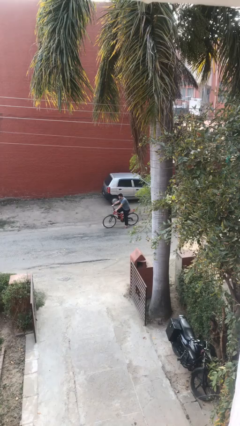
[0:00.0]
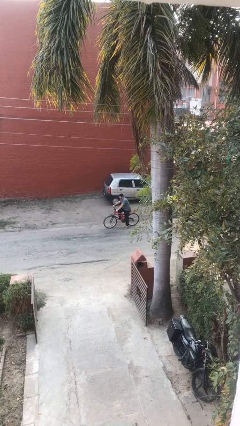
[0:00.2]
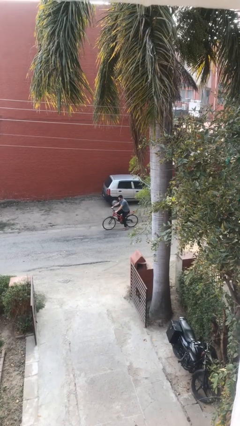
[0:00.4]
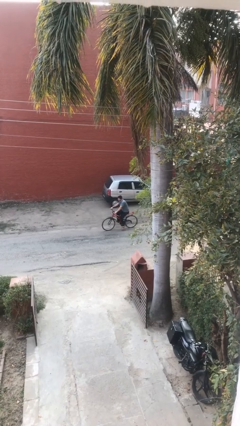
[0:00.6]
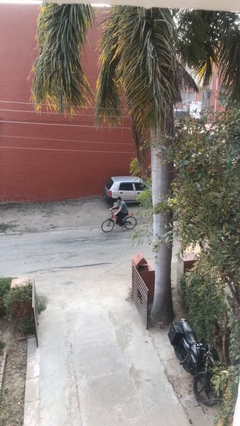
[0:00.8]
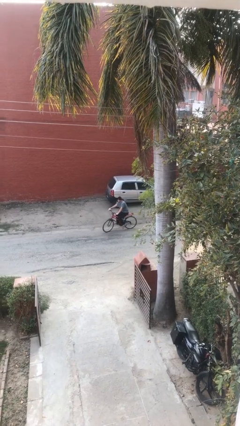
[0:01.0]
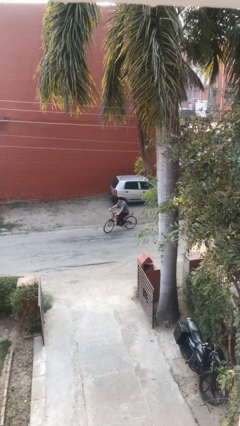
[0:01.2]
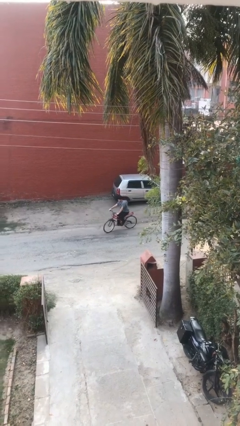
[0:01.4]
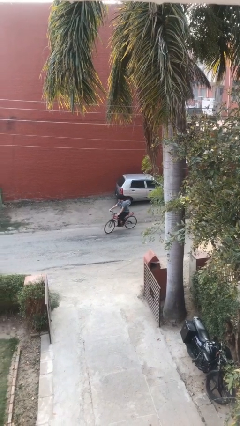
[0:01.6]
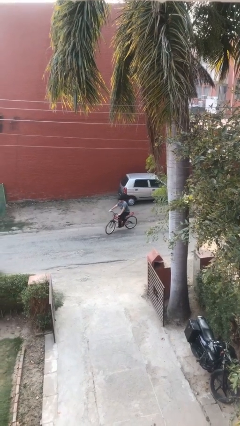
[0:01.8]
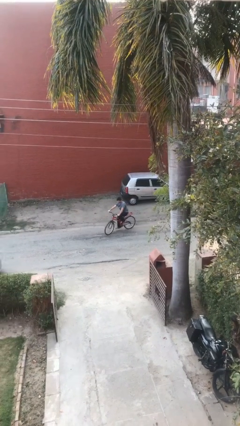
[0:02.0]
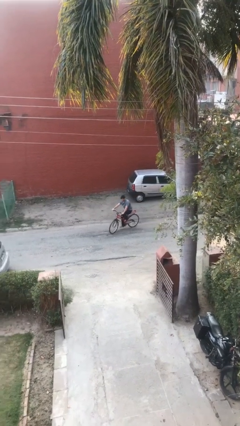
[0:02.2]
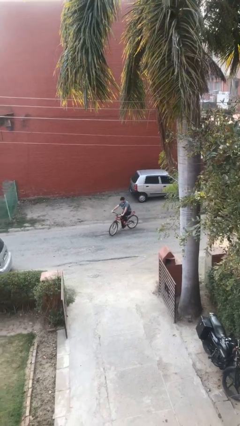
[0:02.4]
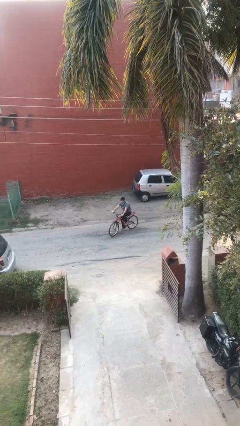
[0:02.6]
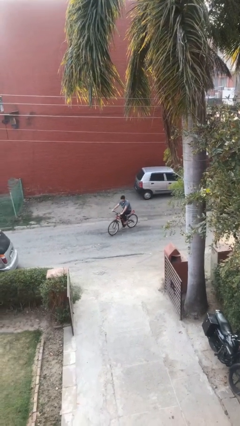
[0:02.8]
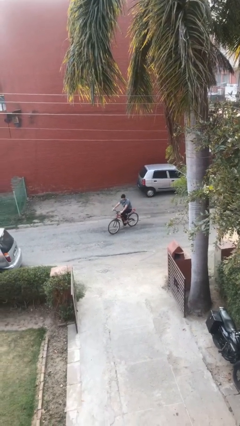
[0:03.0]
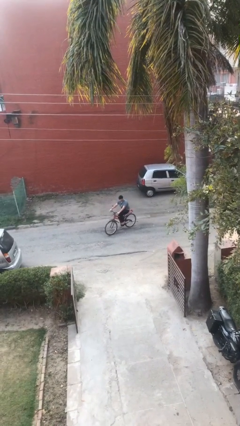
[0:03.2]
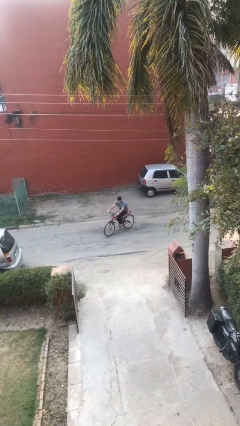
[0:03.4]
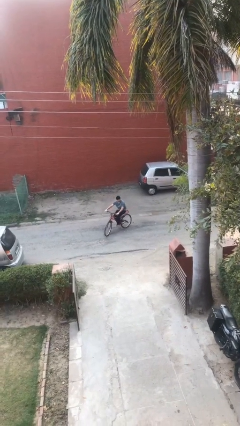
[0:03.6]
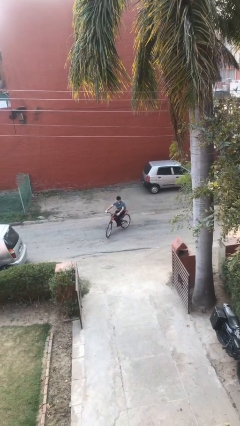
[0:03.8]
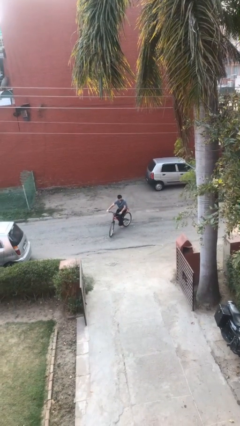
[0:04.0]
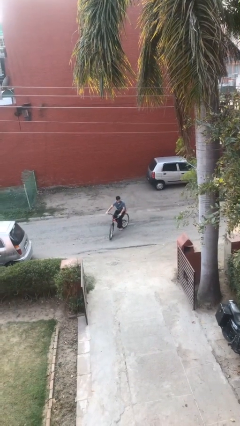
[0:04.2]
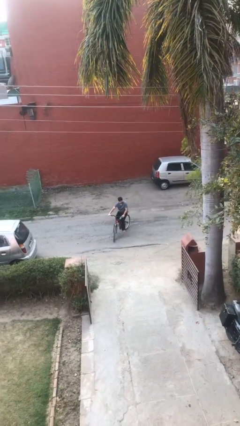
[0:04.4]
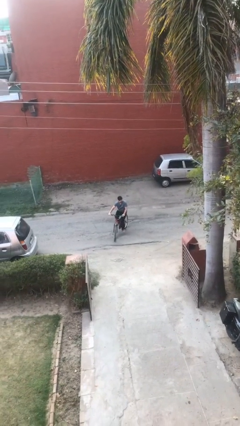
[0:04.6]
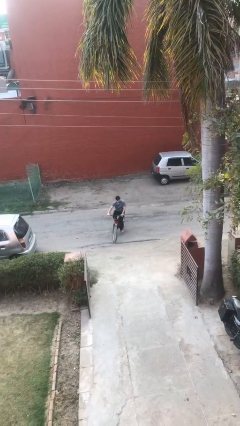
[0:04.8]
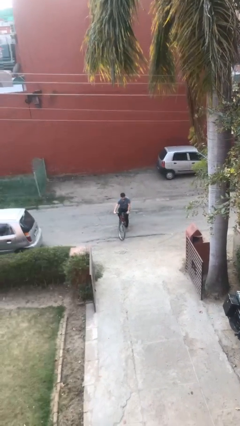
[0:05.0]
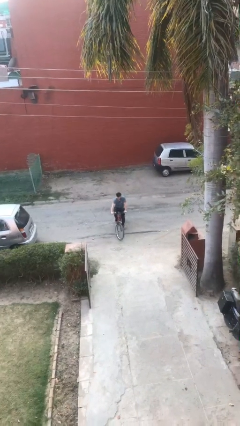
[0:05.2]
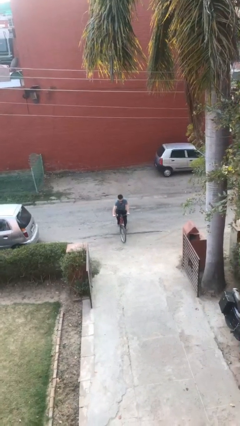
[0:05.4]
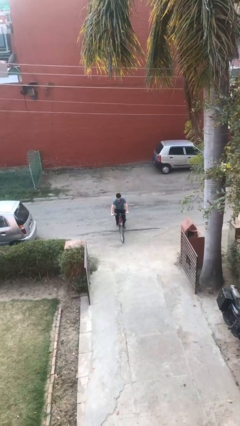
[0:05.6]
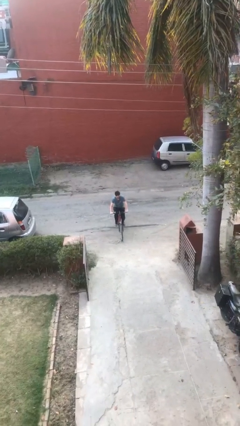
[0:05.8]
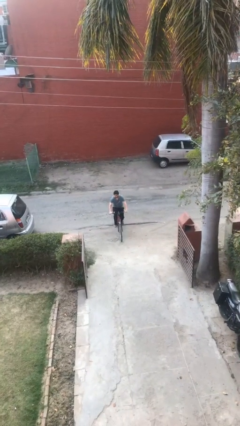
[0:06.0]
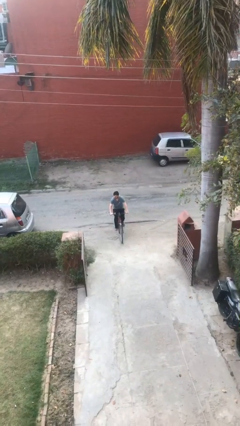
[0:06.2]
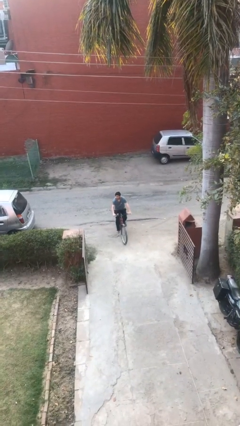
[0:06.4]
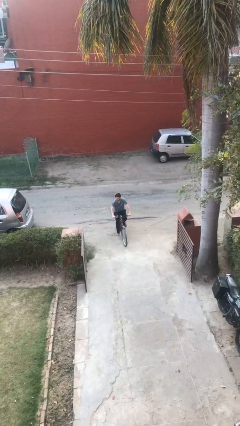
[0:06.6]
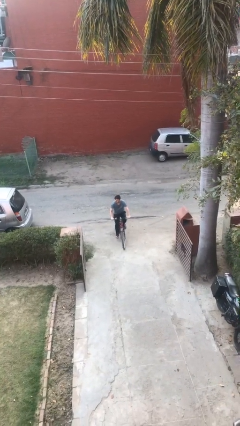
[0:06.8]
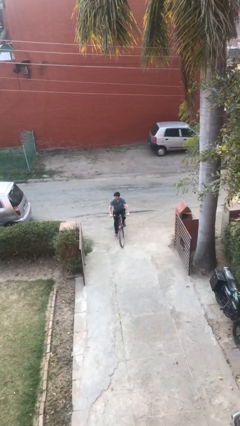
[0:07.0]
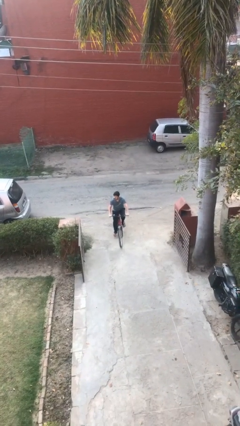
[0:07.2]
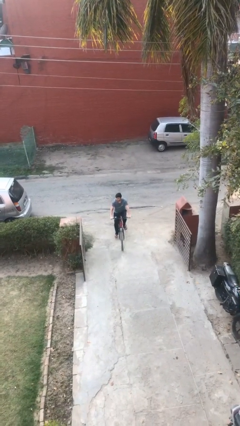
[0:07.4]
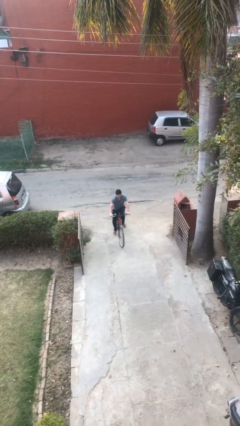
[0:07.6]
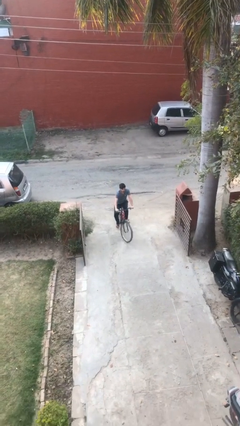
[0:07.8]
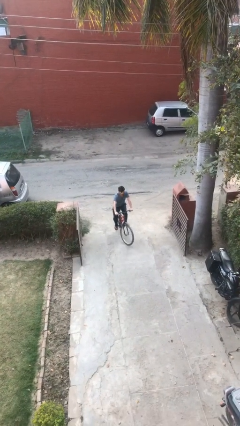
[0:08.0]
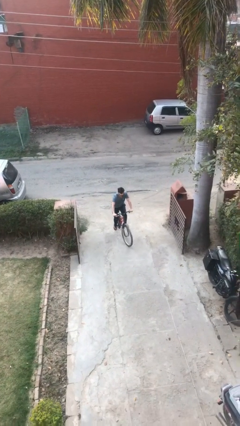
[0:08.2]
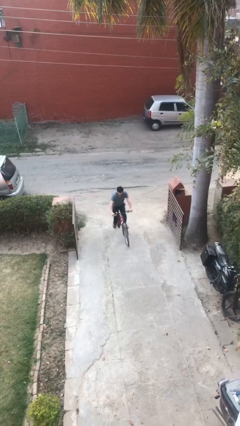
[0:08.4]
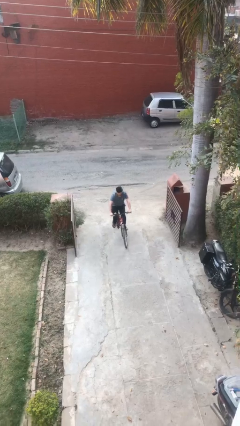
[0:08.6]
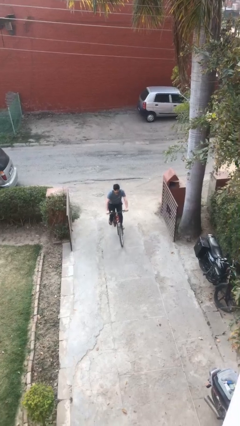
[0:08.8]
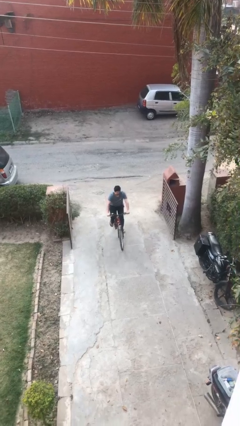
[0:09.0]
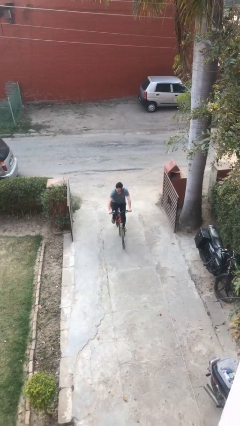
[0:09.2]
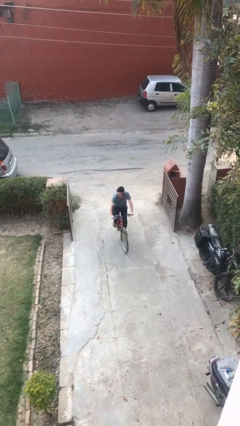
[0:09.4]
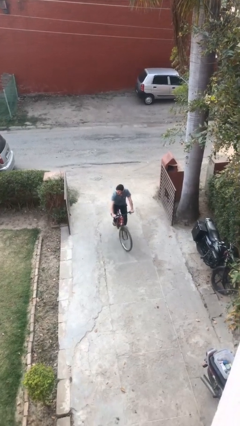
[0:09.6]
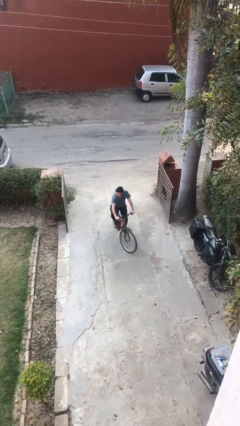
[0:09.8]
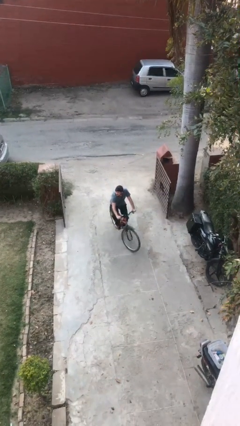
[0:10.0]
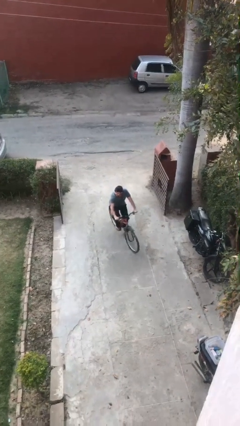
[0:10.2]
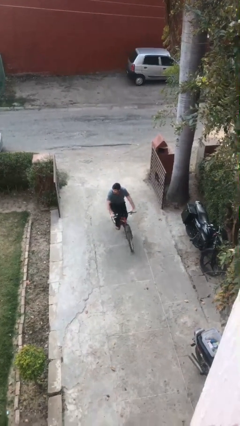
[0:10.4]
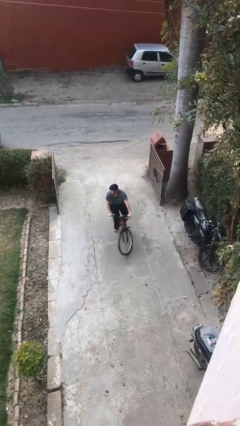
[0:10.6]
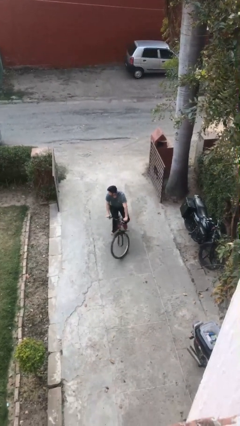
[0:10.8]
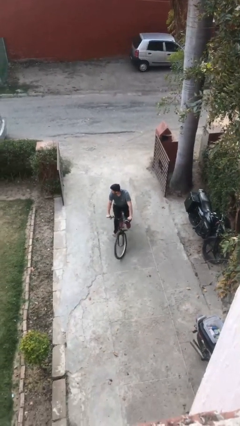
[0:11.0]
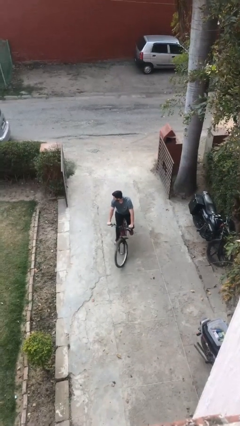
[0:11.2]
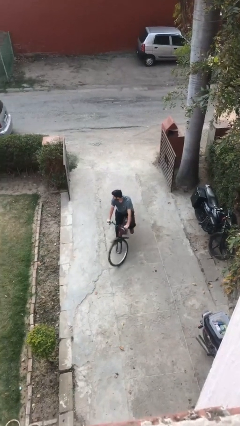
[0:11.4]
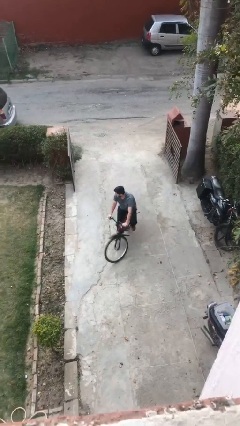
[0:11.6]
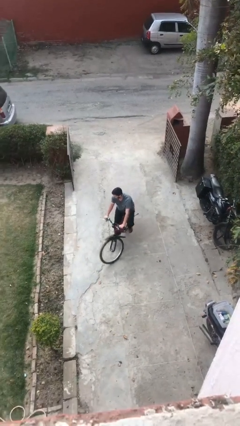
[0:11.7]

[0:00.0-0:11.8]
person rides bicycle

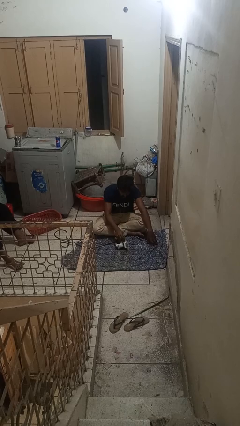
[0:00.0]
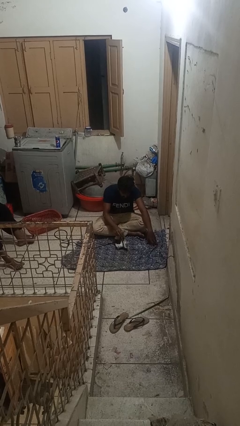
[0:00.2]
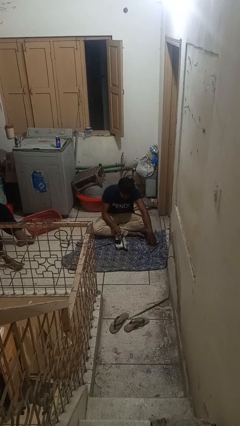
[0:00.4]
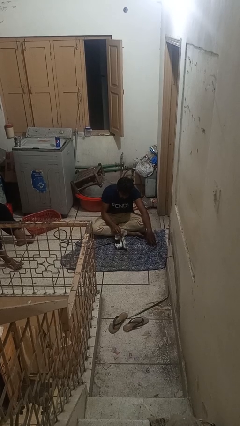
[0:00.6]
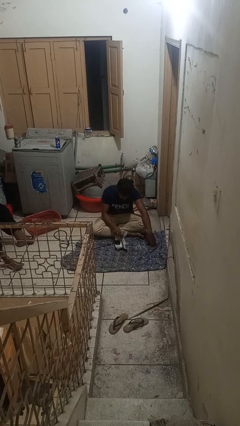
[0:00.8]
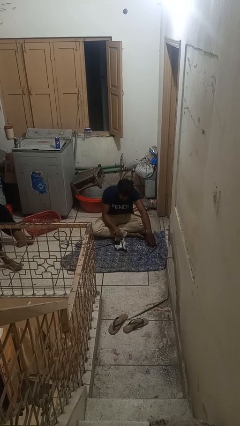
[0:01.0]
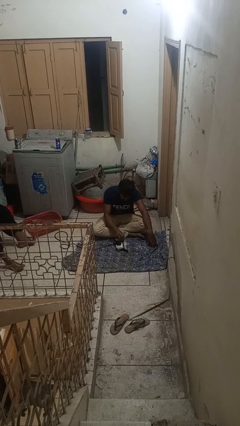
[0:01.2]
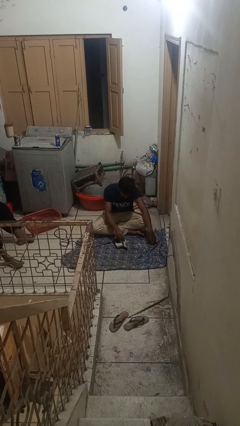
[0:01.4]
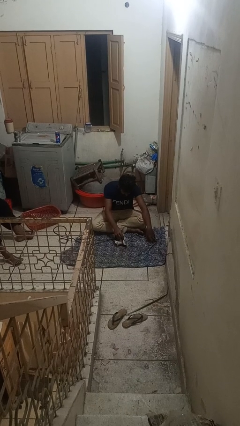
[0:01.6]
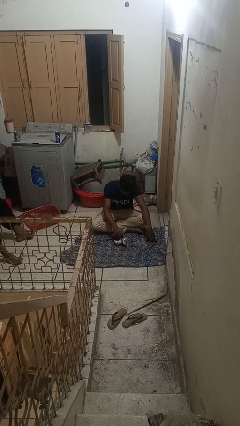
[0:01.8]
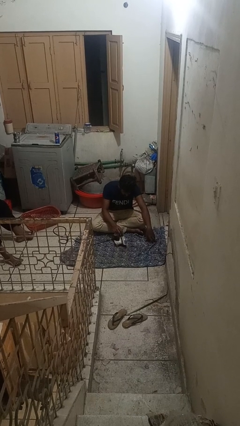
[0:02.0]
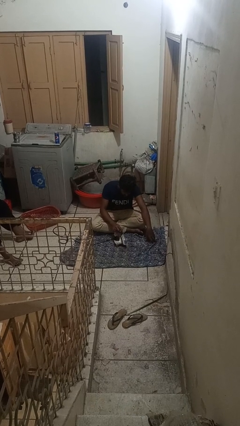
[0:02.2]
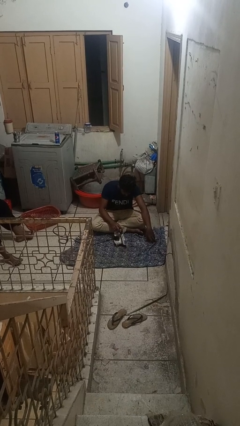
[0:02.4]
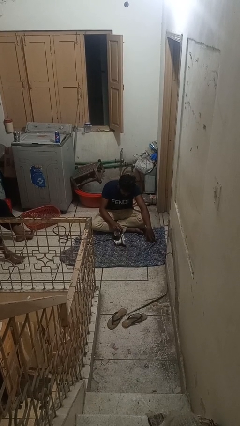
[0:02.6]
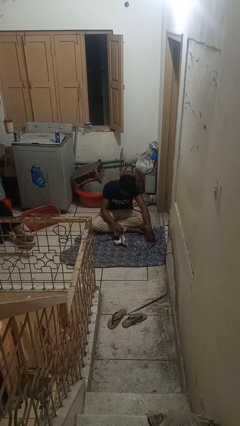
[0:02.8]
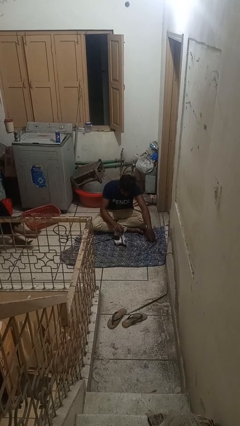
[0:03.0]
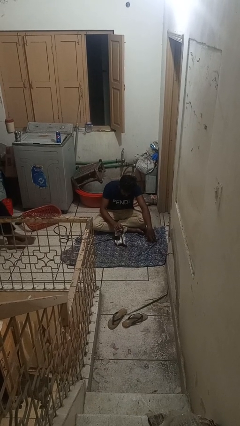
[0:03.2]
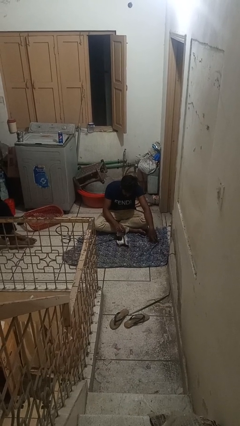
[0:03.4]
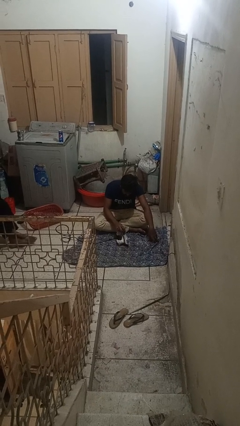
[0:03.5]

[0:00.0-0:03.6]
person taps object with finger

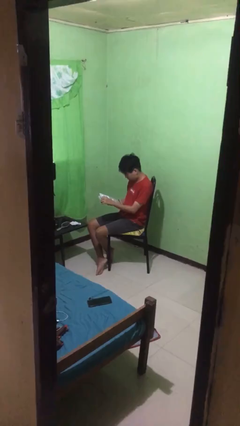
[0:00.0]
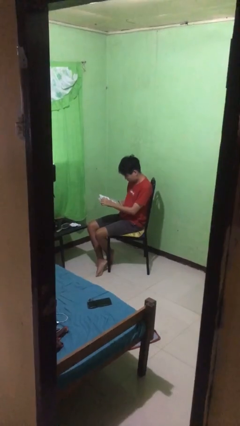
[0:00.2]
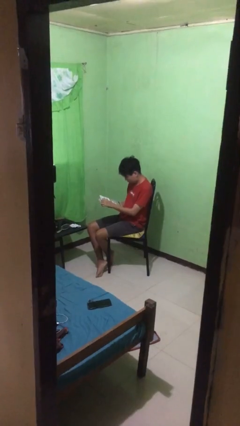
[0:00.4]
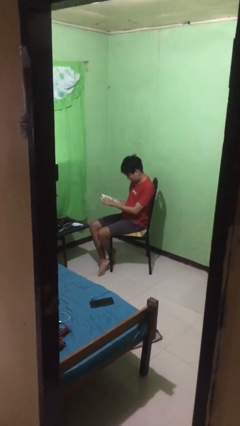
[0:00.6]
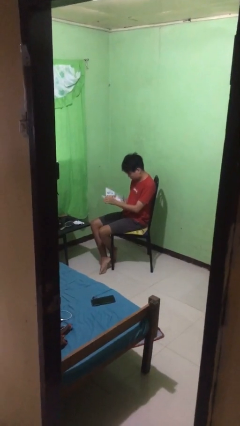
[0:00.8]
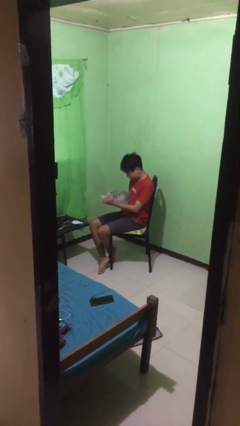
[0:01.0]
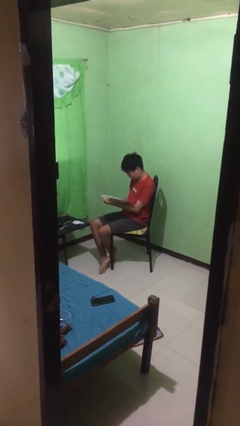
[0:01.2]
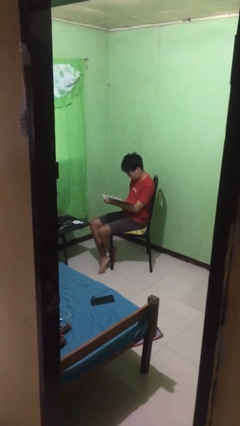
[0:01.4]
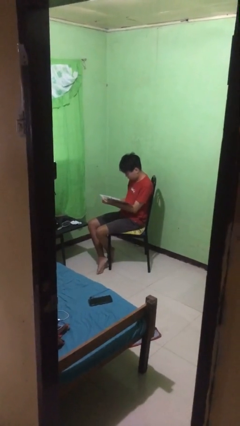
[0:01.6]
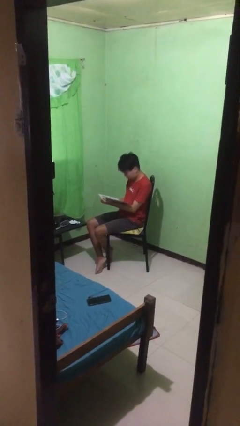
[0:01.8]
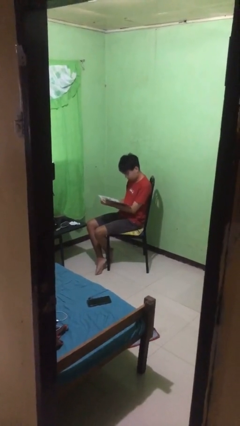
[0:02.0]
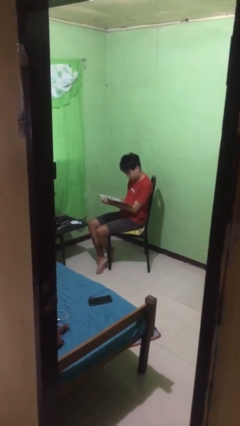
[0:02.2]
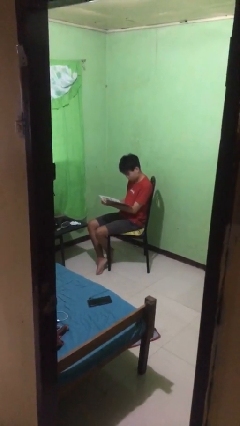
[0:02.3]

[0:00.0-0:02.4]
person reads document

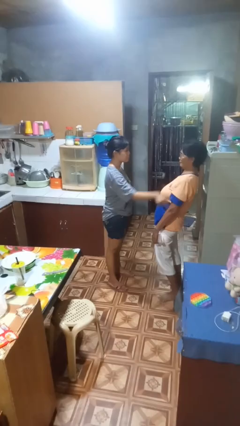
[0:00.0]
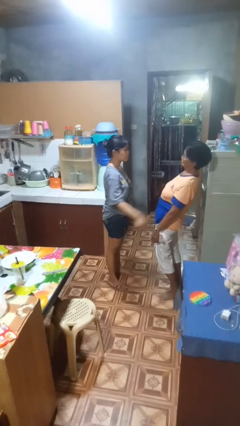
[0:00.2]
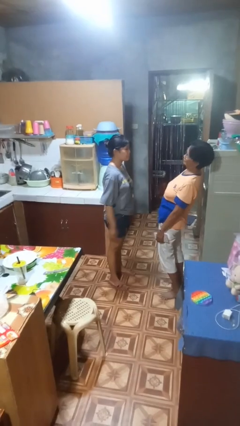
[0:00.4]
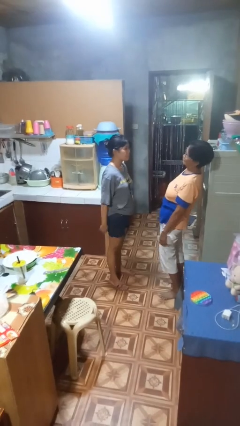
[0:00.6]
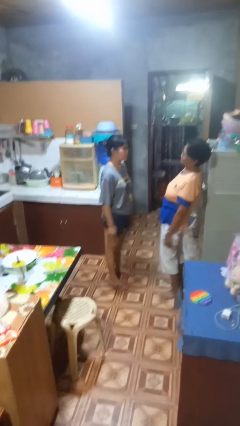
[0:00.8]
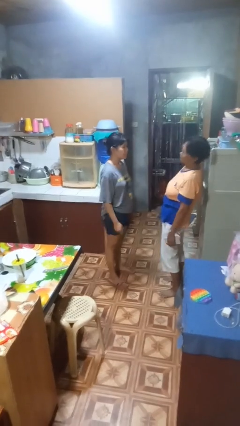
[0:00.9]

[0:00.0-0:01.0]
person shoves person
